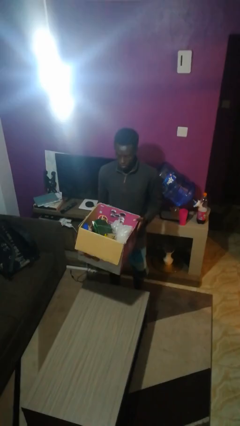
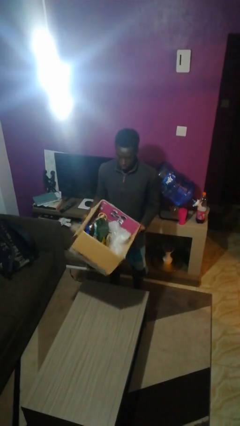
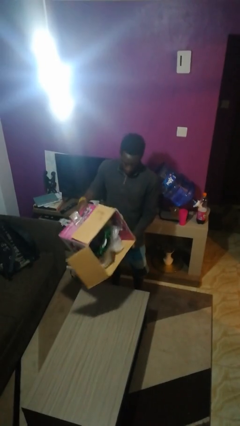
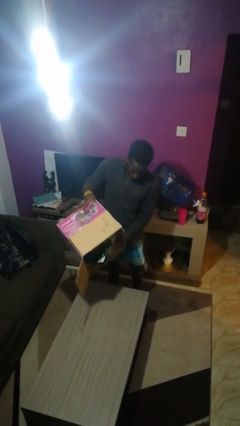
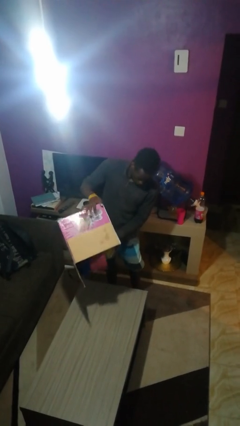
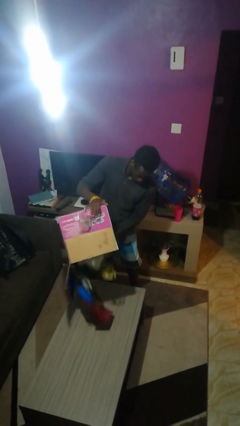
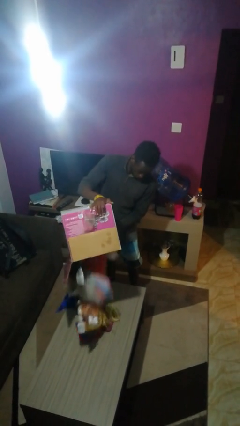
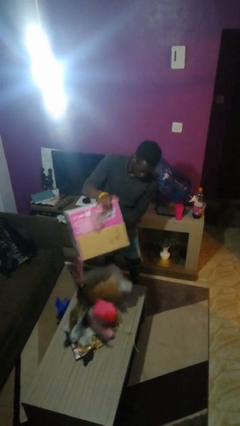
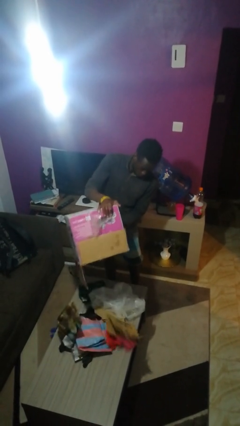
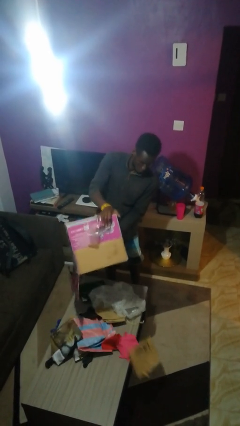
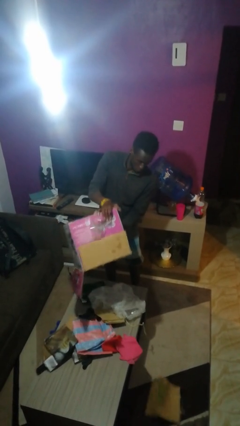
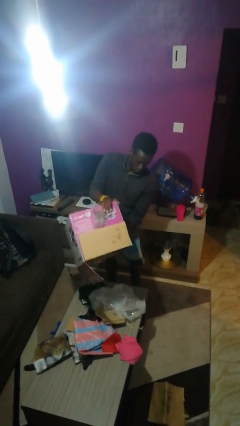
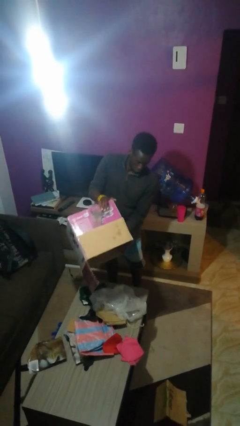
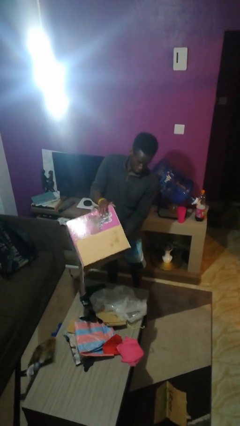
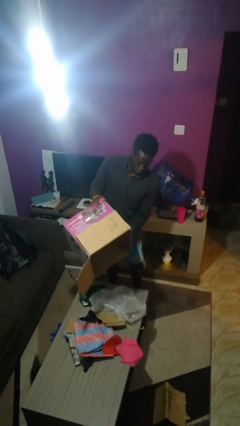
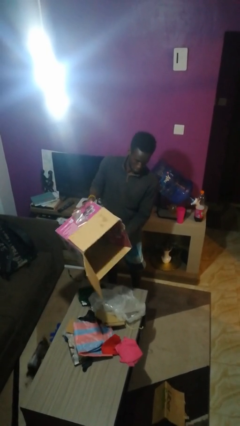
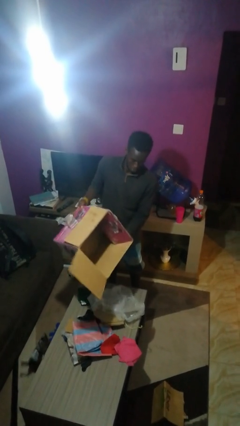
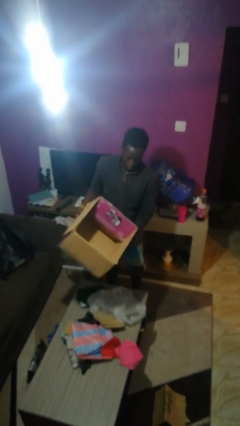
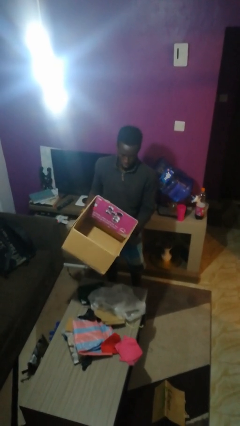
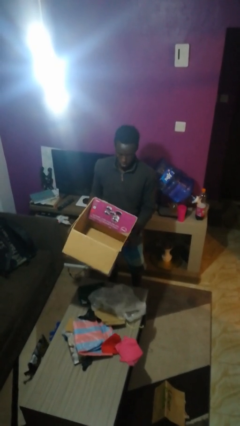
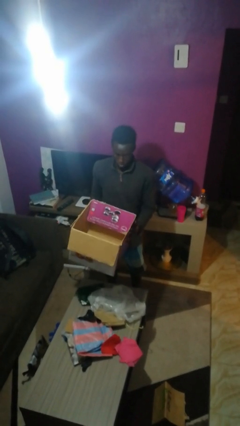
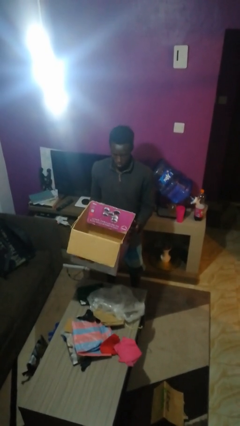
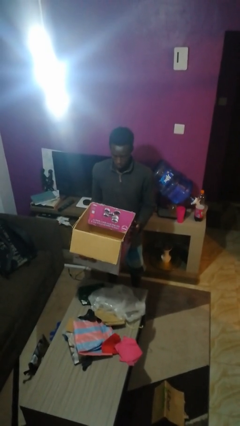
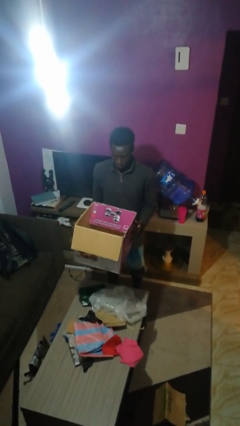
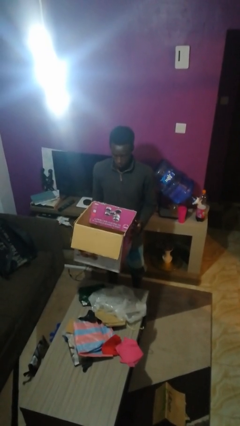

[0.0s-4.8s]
person unloads box onto table

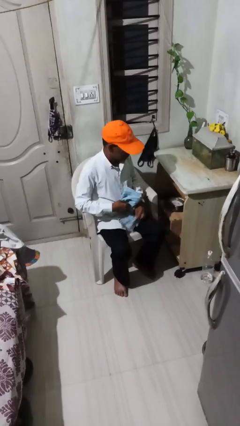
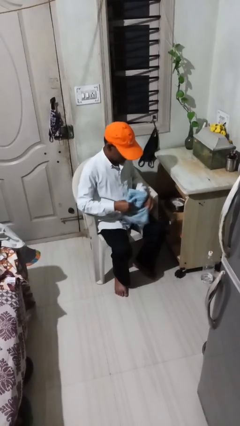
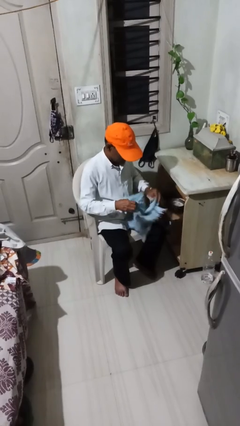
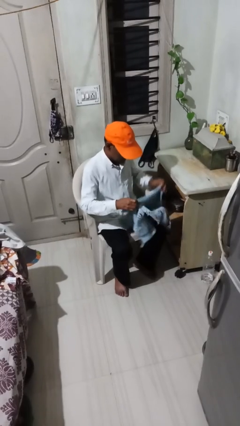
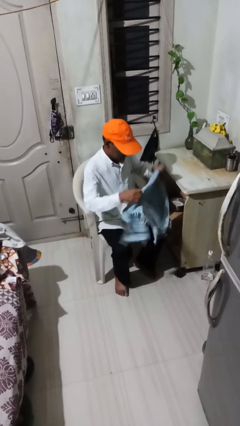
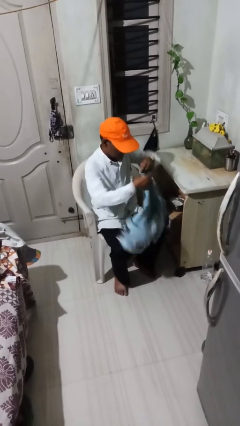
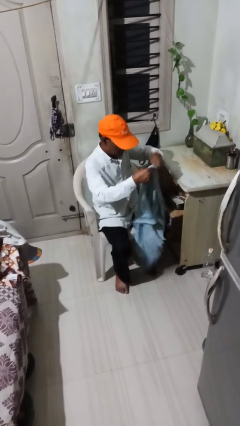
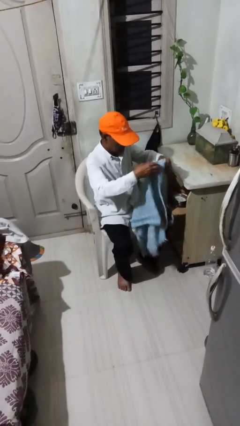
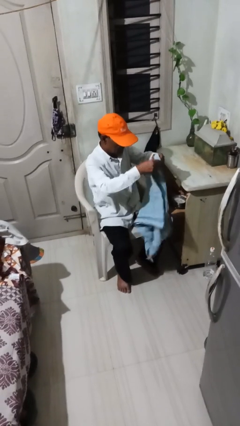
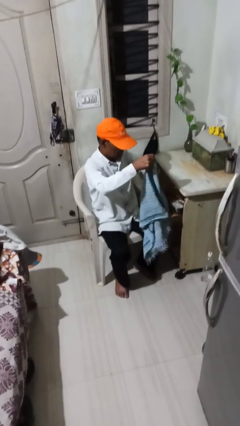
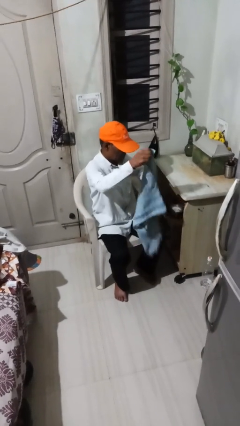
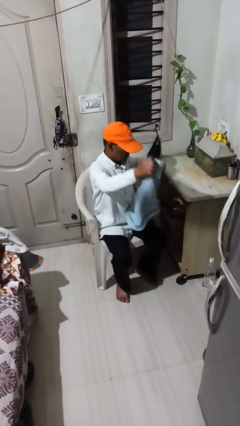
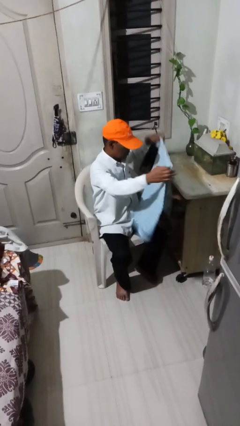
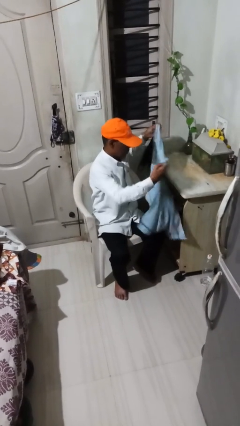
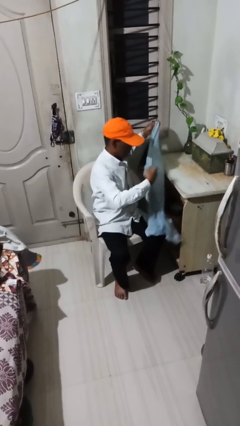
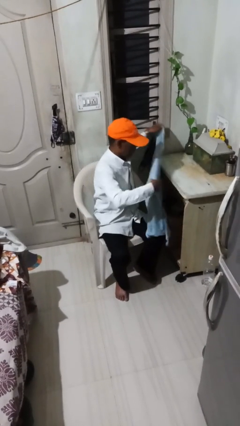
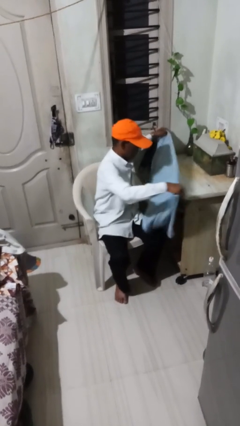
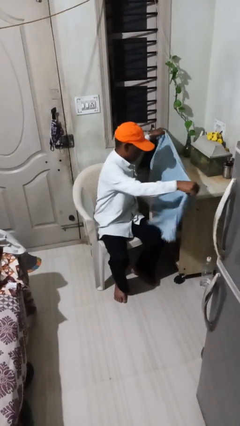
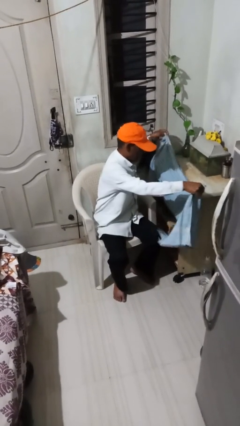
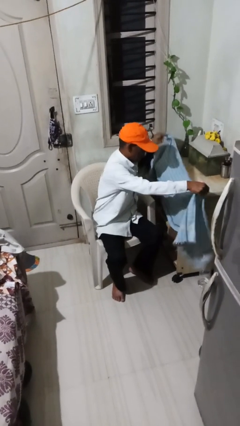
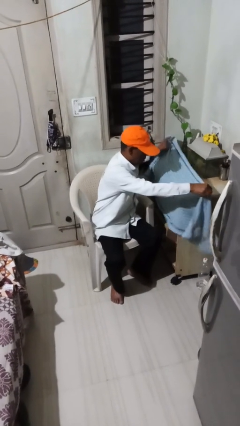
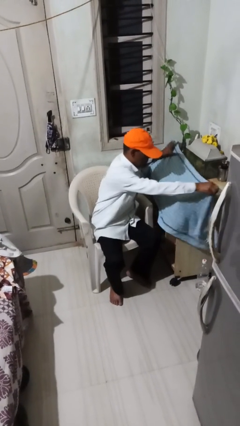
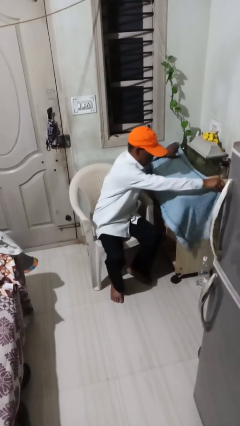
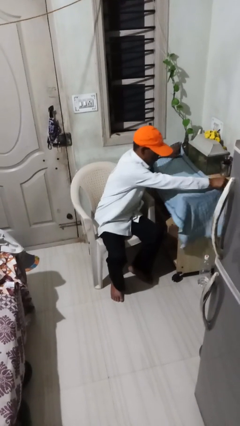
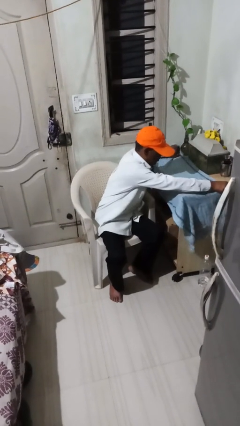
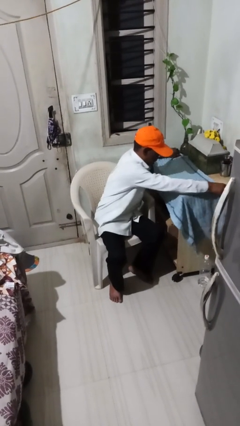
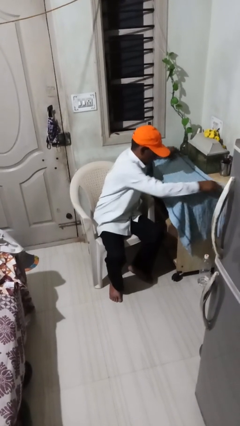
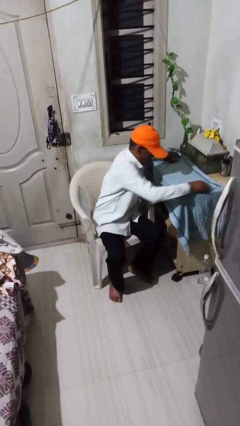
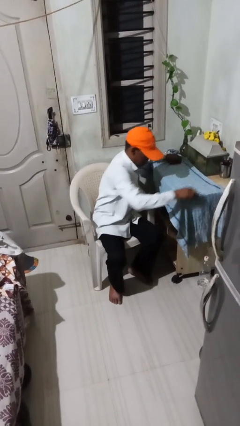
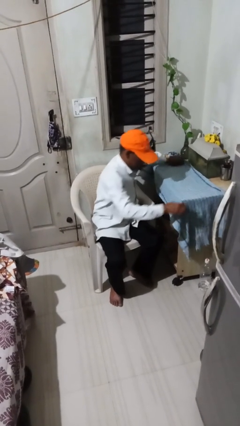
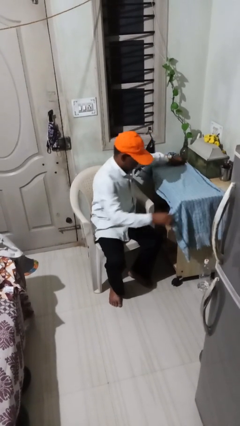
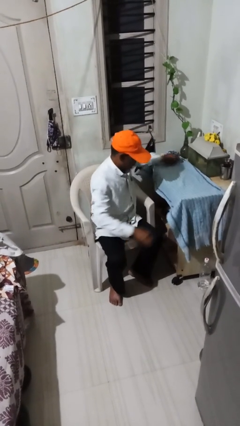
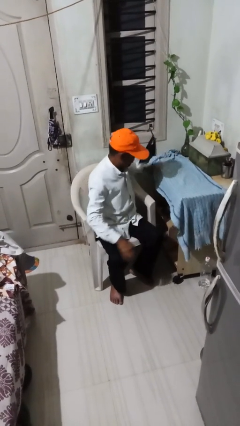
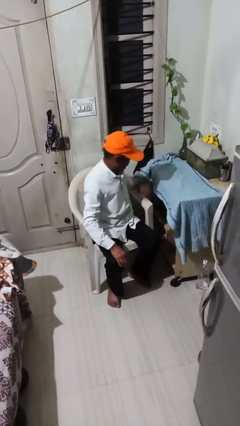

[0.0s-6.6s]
person spreads tablecloth

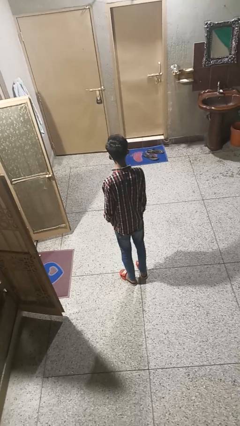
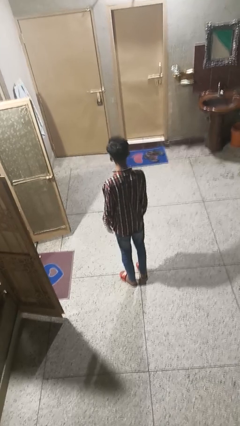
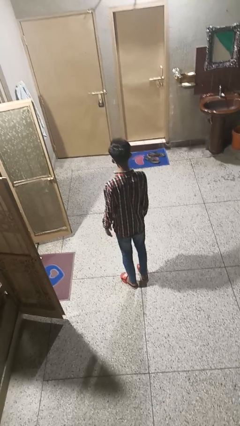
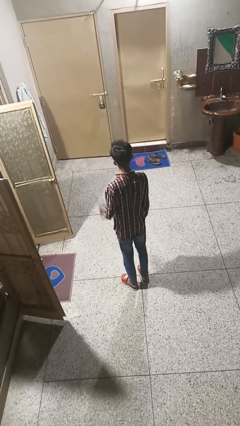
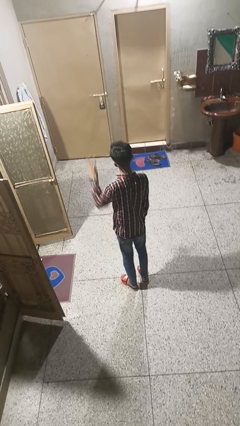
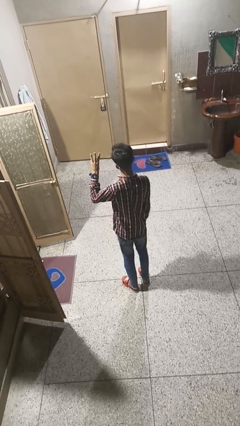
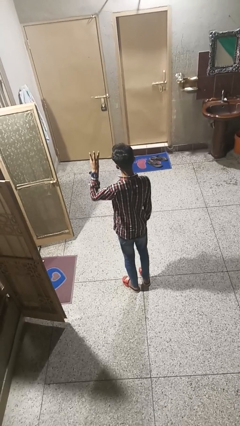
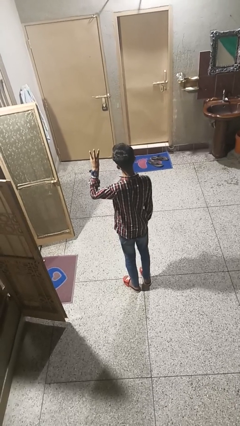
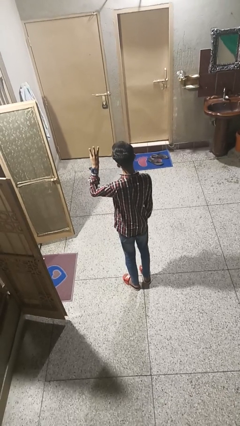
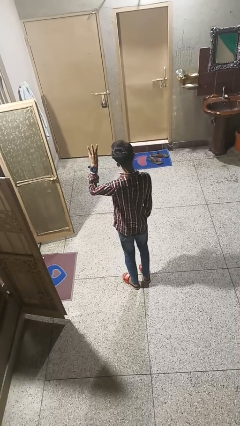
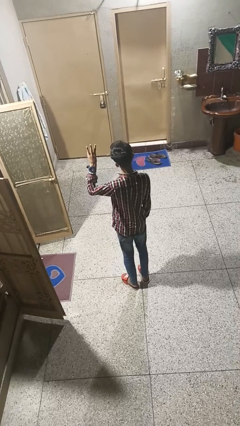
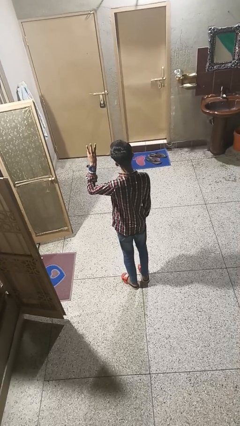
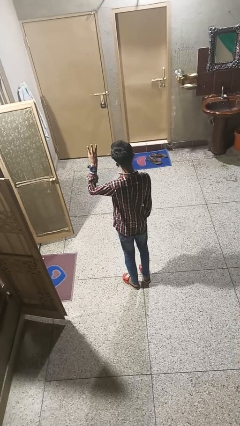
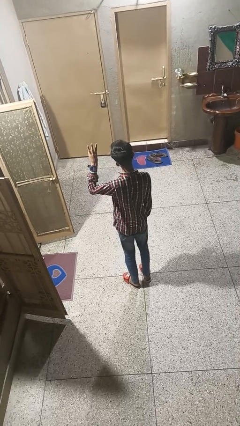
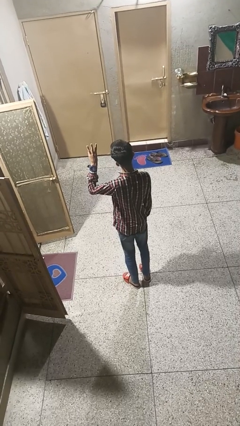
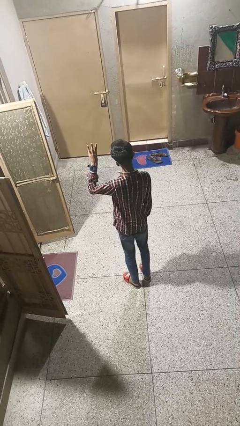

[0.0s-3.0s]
person gestures number three

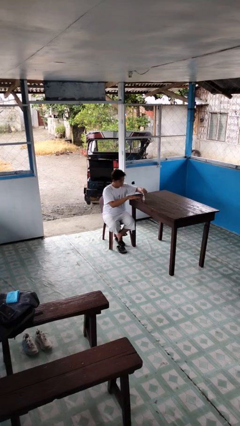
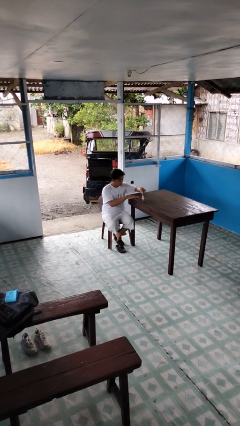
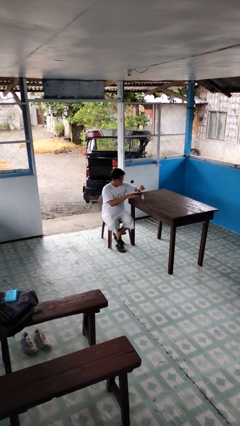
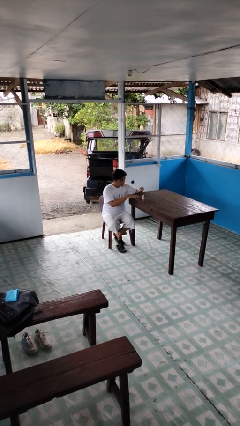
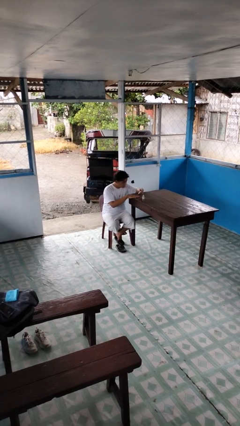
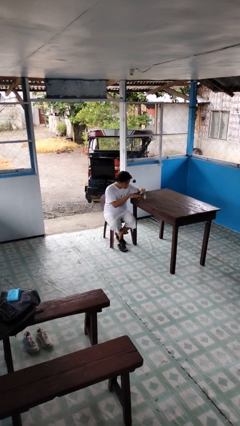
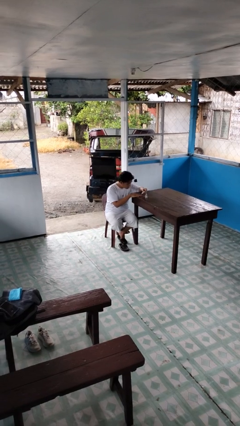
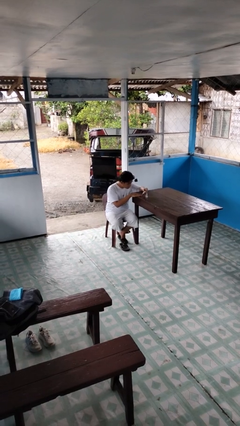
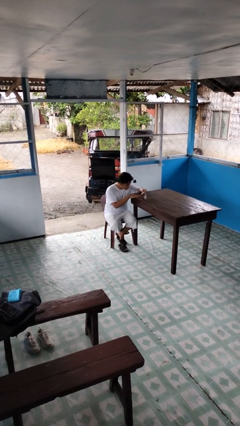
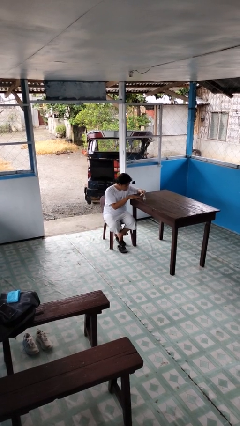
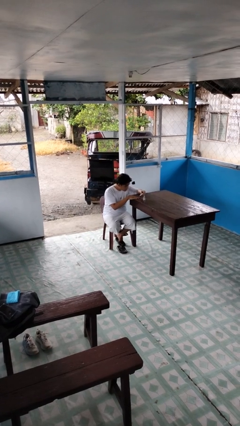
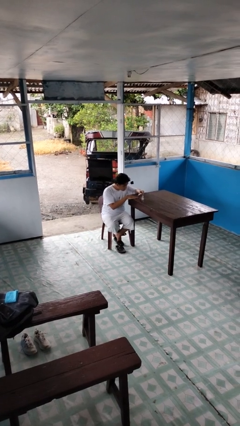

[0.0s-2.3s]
person paints fingernails

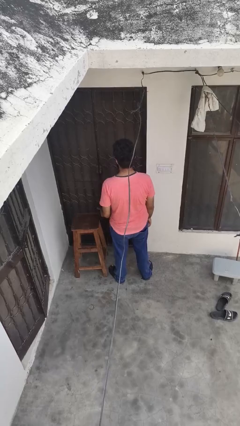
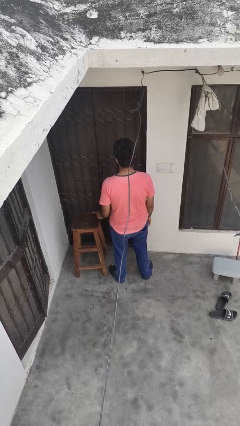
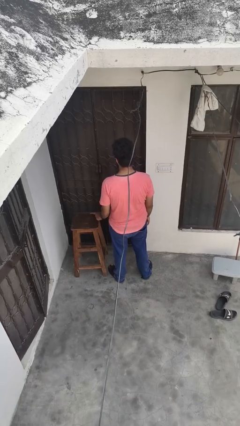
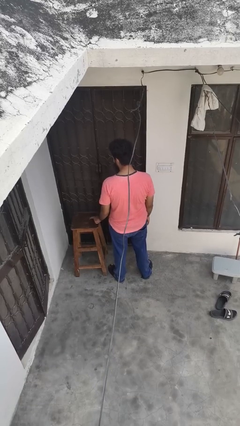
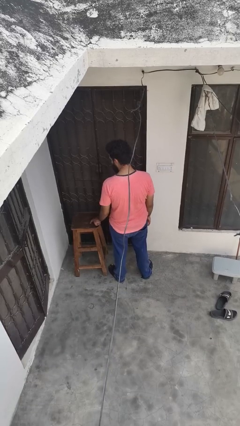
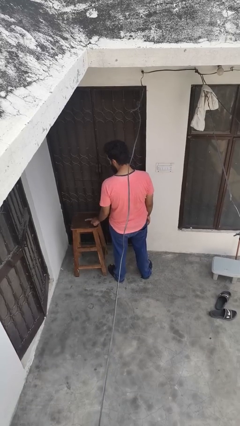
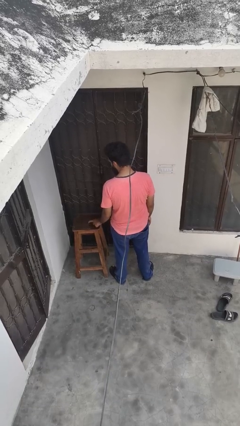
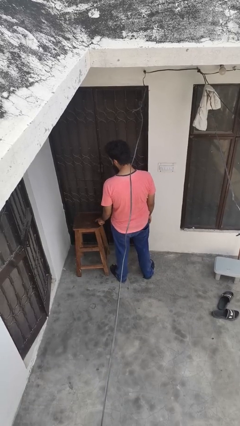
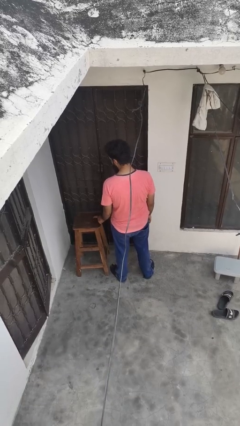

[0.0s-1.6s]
person taps object with finger
